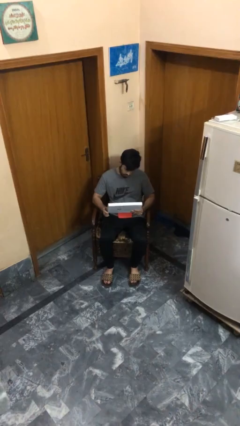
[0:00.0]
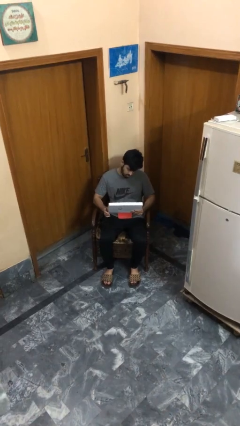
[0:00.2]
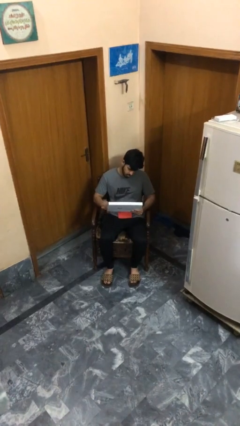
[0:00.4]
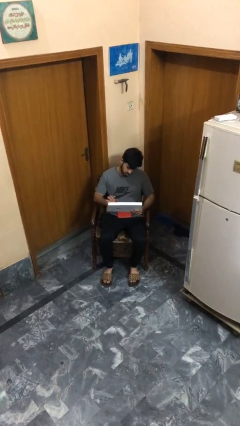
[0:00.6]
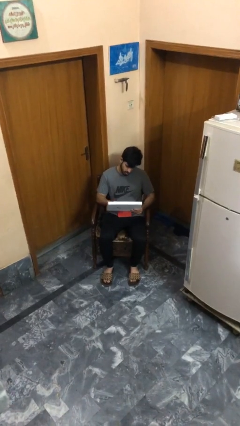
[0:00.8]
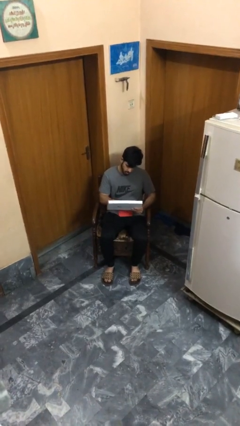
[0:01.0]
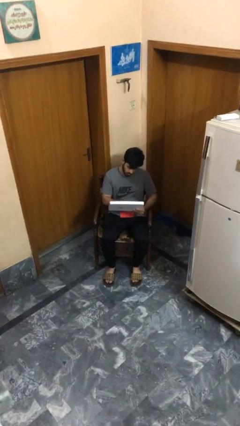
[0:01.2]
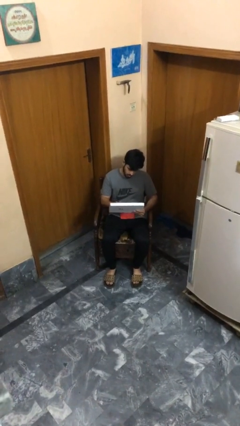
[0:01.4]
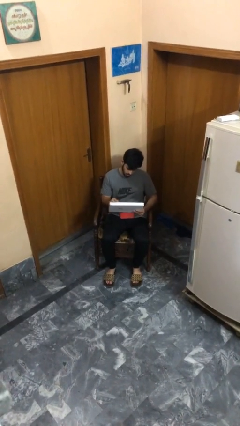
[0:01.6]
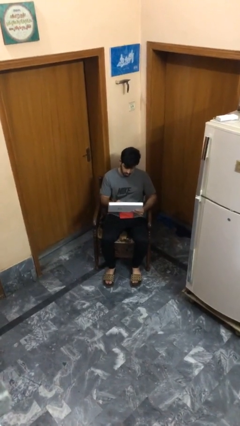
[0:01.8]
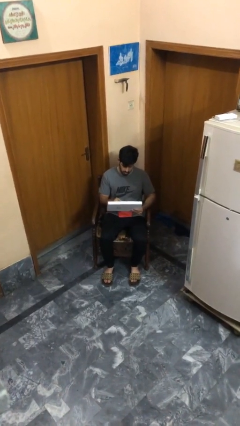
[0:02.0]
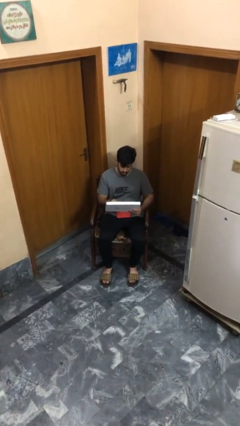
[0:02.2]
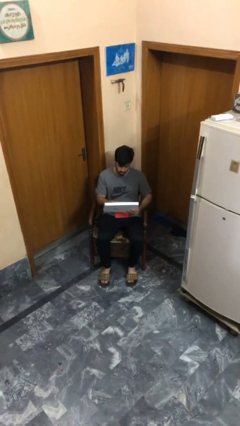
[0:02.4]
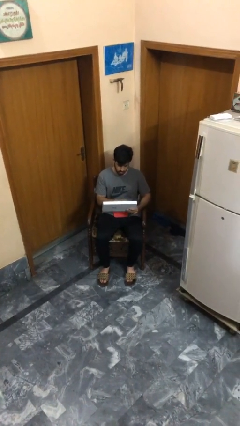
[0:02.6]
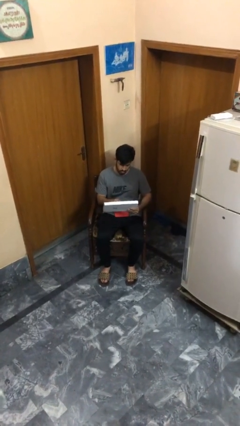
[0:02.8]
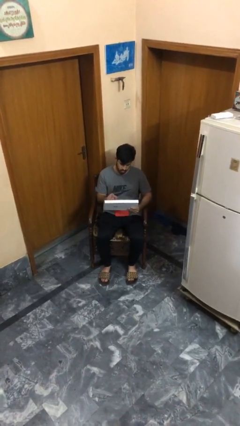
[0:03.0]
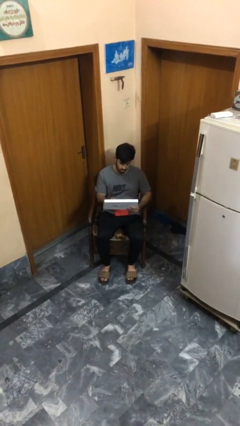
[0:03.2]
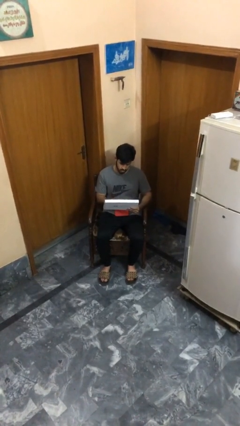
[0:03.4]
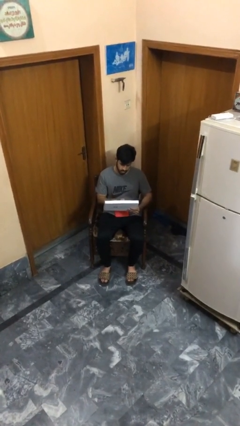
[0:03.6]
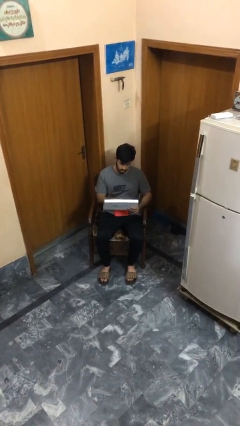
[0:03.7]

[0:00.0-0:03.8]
person interacts with tablet

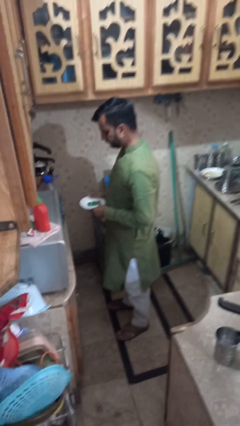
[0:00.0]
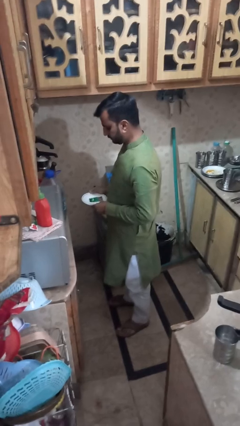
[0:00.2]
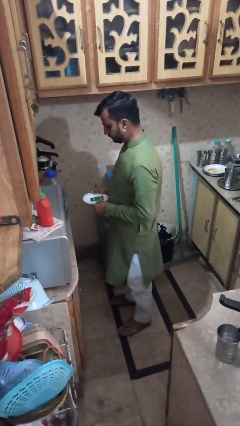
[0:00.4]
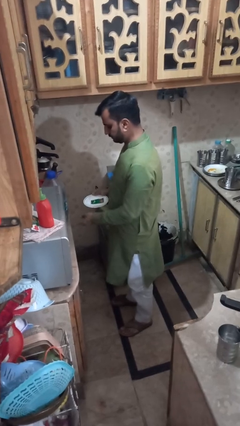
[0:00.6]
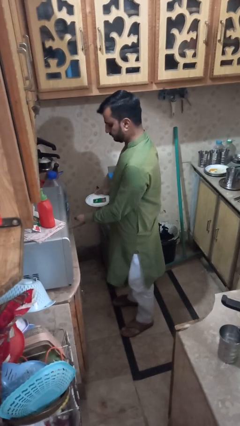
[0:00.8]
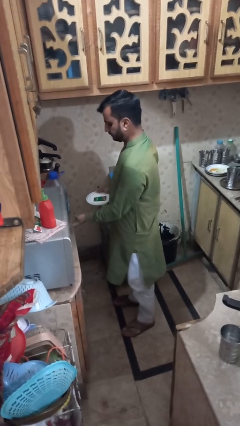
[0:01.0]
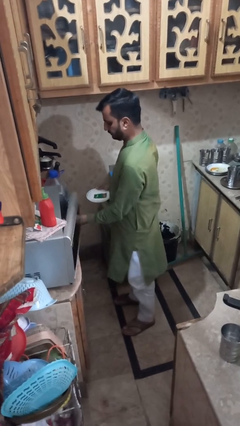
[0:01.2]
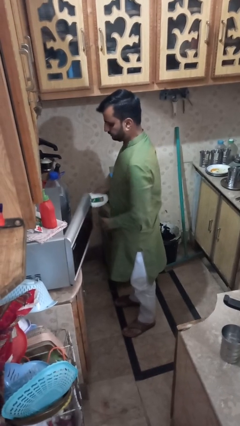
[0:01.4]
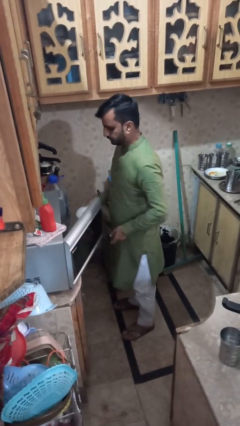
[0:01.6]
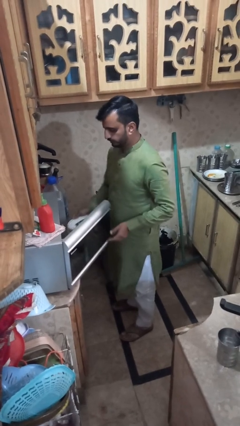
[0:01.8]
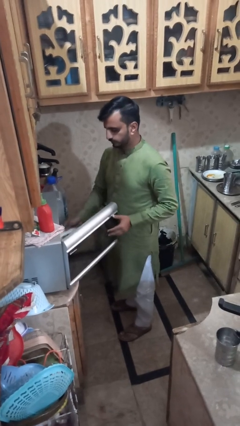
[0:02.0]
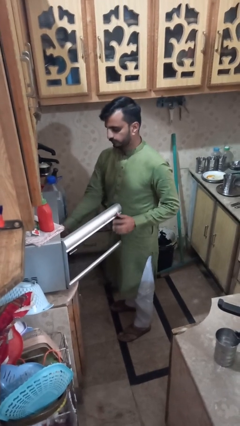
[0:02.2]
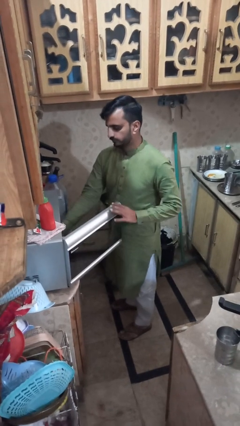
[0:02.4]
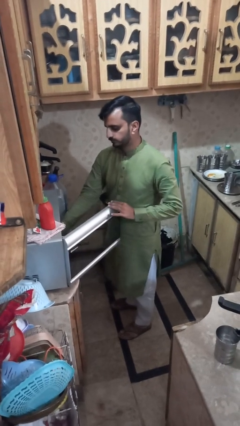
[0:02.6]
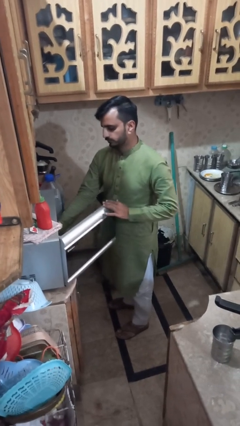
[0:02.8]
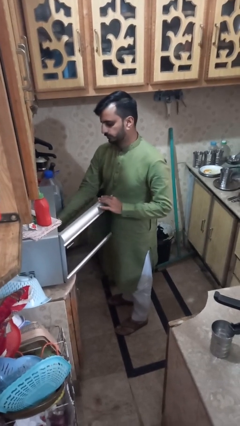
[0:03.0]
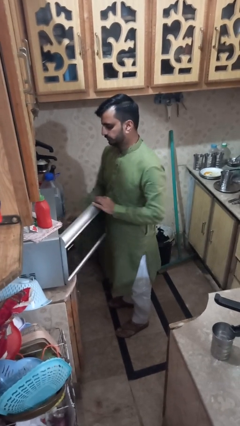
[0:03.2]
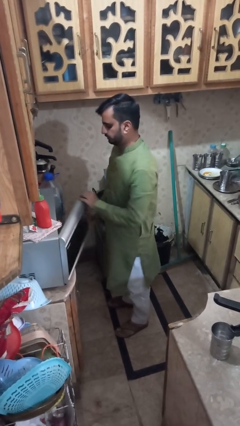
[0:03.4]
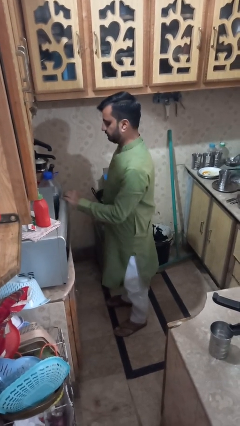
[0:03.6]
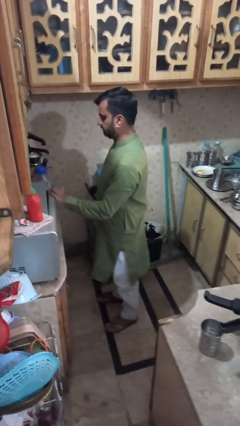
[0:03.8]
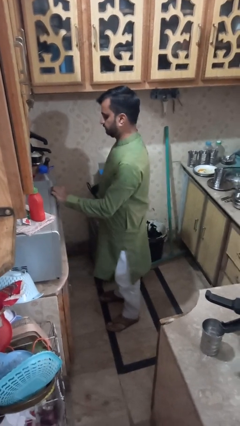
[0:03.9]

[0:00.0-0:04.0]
person puts object into microwave

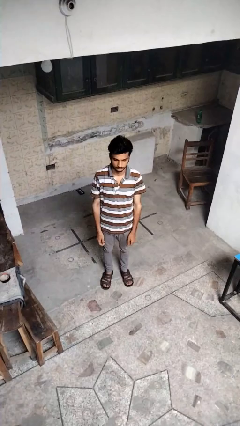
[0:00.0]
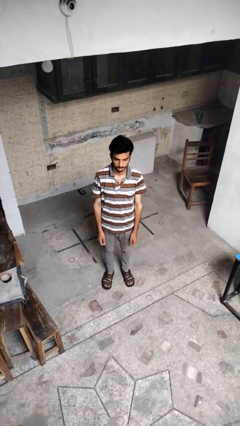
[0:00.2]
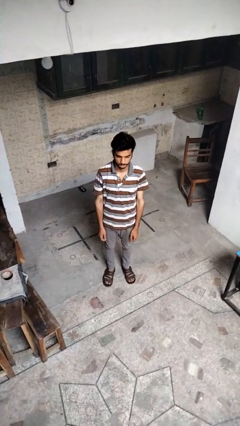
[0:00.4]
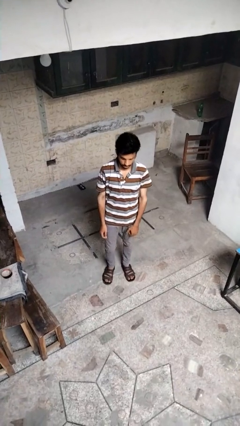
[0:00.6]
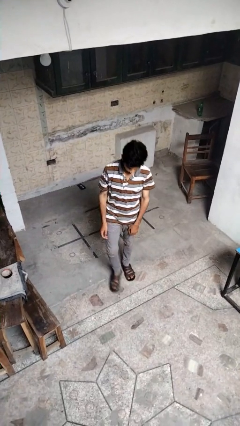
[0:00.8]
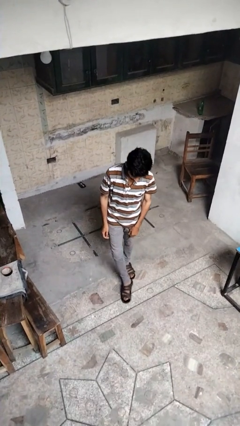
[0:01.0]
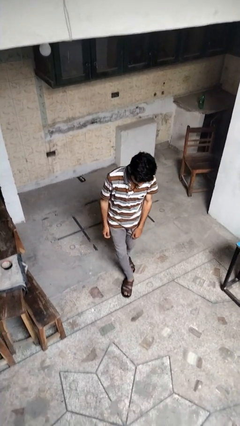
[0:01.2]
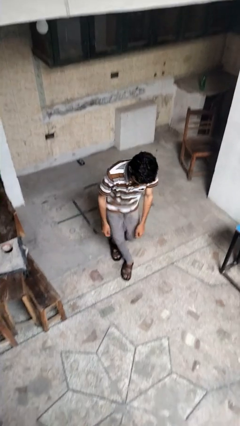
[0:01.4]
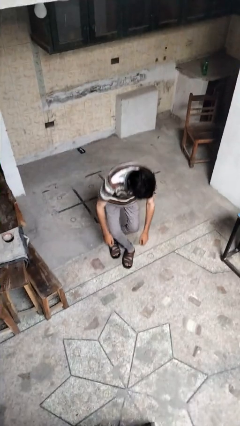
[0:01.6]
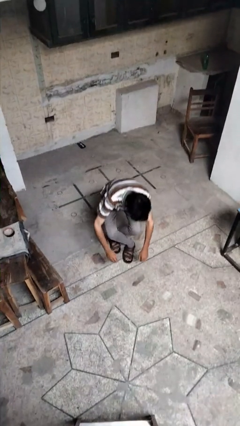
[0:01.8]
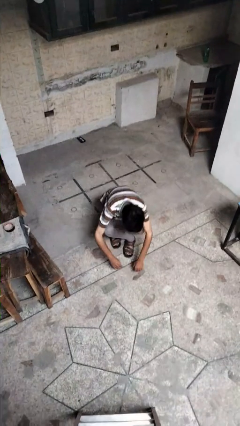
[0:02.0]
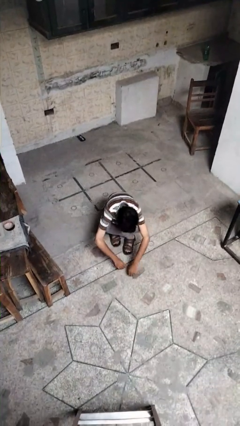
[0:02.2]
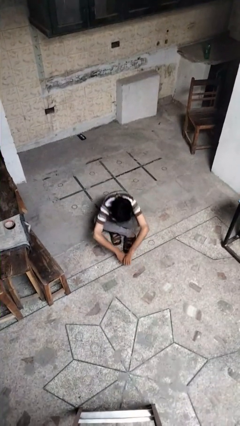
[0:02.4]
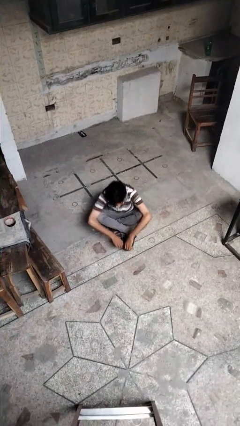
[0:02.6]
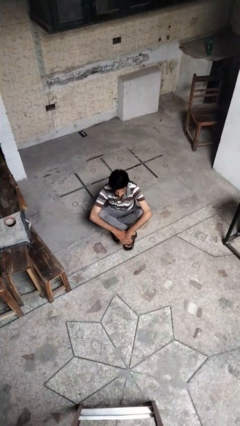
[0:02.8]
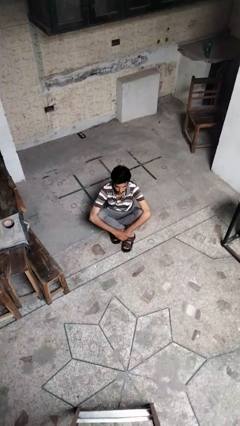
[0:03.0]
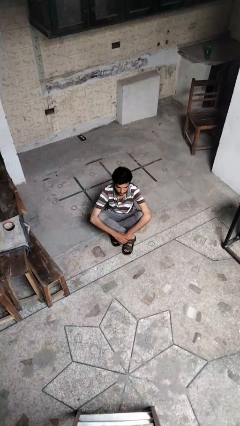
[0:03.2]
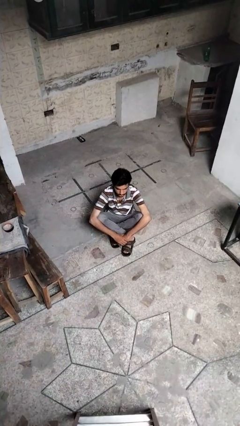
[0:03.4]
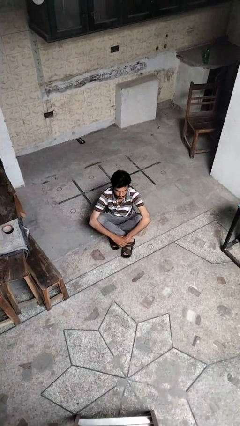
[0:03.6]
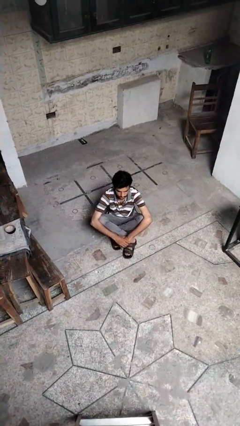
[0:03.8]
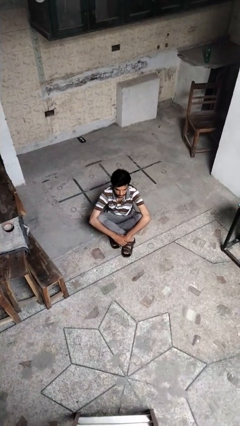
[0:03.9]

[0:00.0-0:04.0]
person sits crisscross

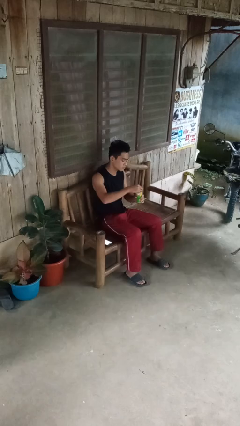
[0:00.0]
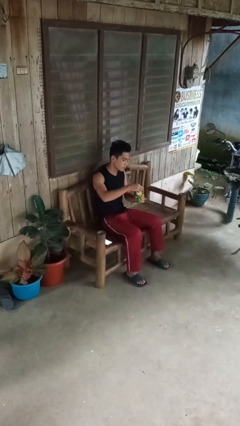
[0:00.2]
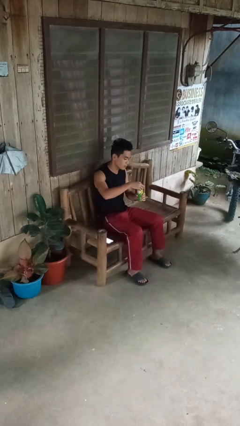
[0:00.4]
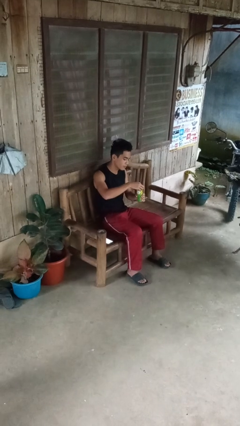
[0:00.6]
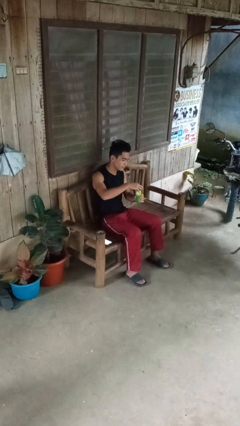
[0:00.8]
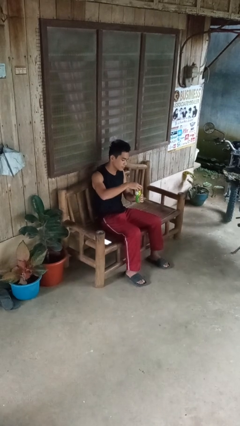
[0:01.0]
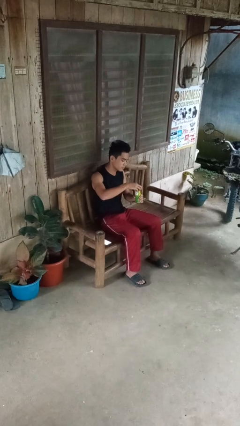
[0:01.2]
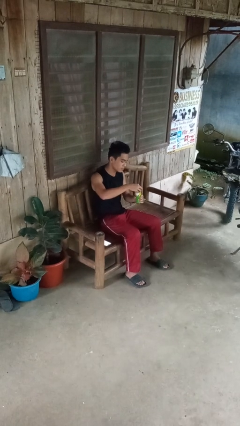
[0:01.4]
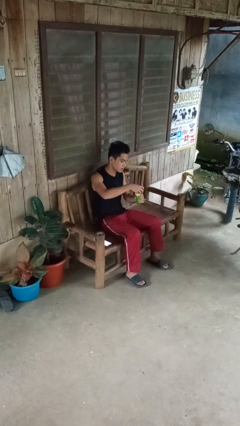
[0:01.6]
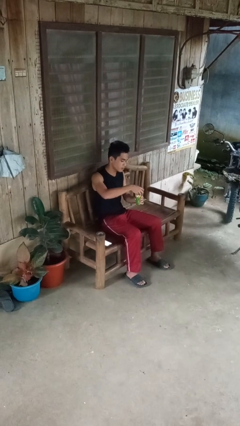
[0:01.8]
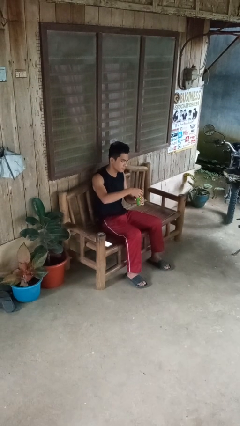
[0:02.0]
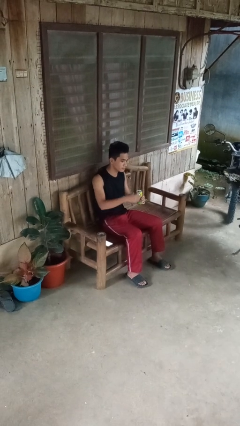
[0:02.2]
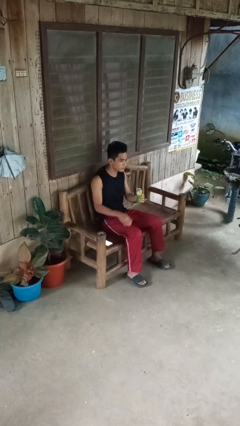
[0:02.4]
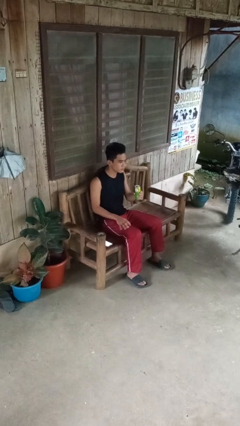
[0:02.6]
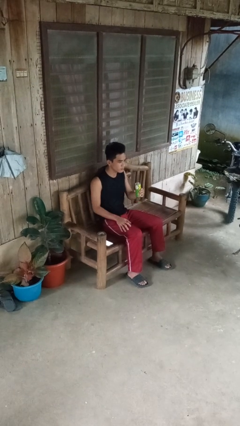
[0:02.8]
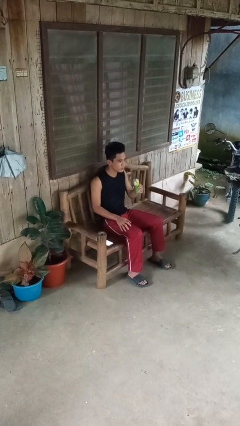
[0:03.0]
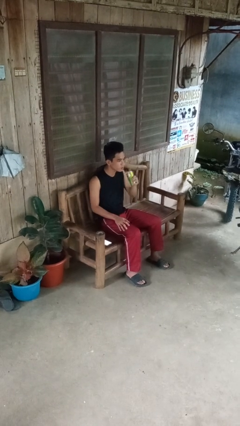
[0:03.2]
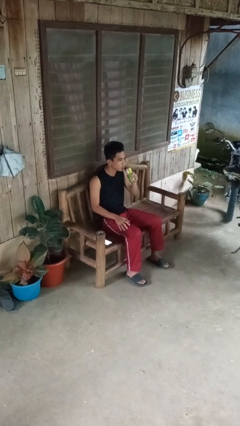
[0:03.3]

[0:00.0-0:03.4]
person opens beverage can

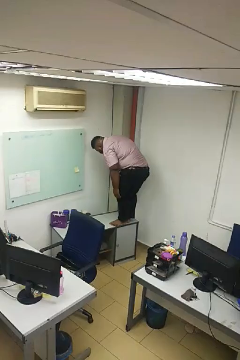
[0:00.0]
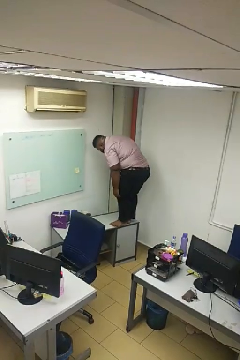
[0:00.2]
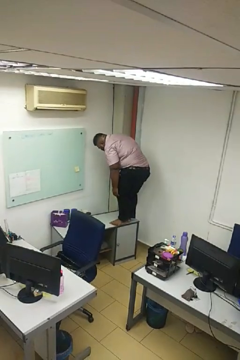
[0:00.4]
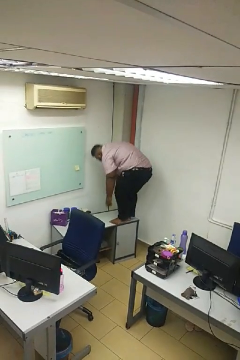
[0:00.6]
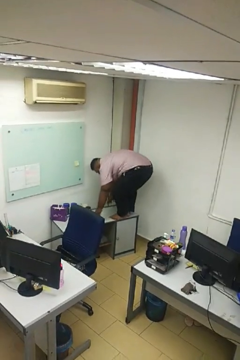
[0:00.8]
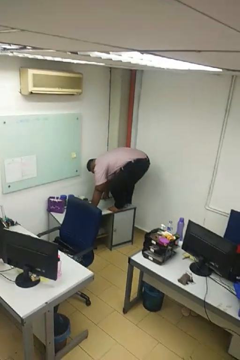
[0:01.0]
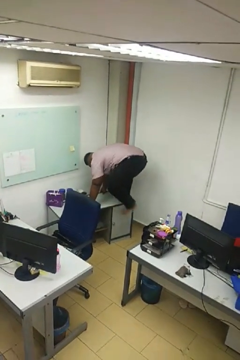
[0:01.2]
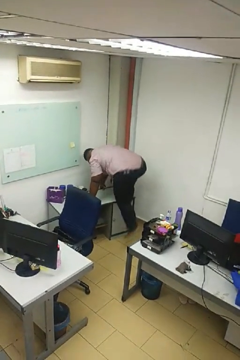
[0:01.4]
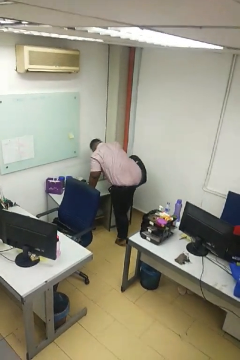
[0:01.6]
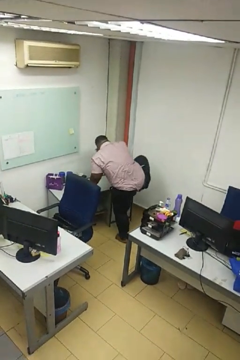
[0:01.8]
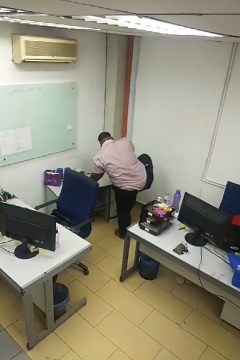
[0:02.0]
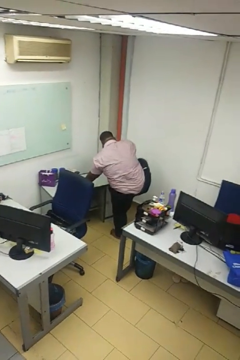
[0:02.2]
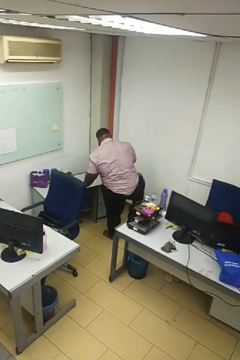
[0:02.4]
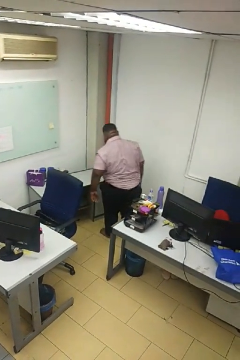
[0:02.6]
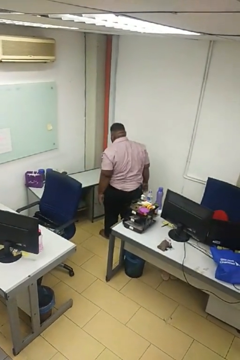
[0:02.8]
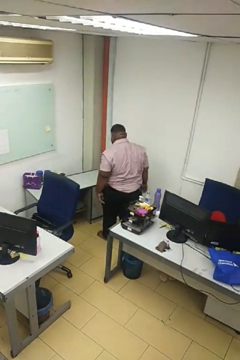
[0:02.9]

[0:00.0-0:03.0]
person climbs off table
